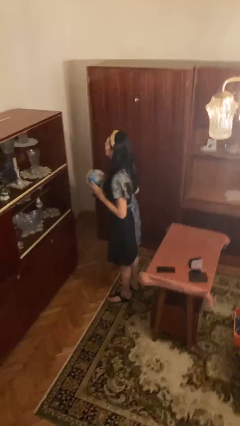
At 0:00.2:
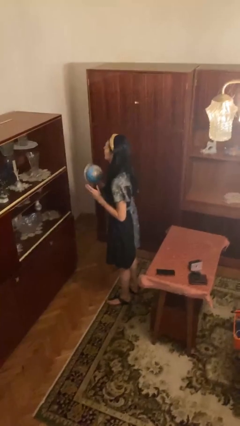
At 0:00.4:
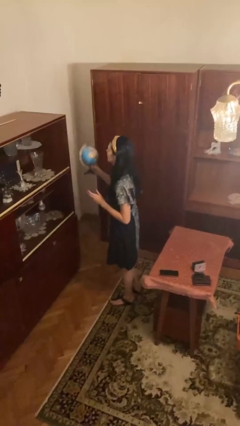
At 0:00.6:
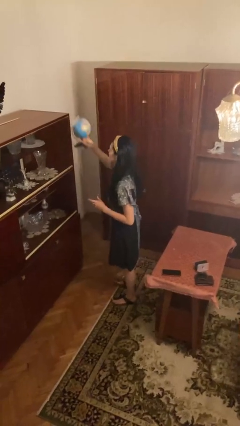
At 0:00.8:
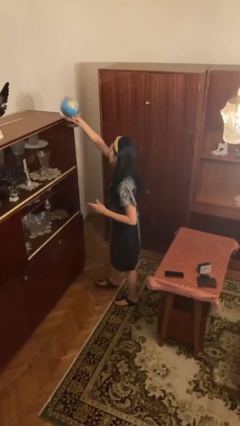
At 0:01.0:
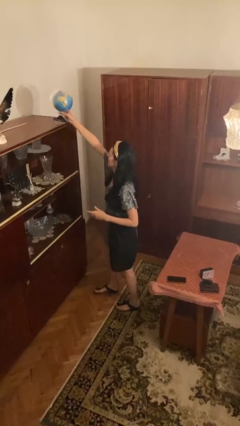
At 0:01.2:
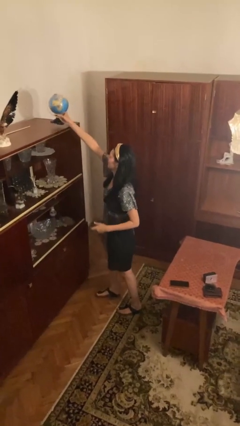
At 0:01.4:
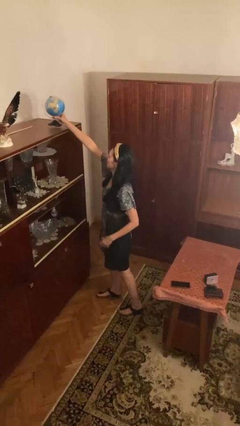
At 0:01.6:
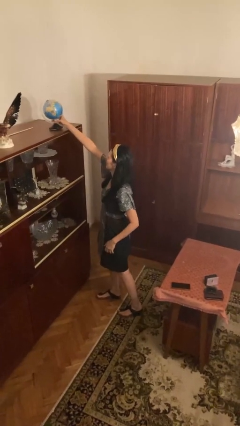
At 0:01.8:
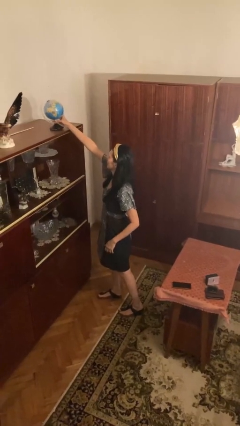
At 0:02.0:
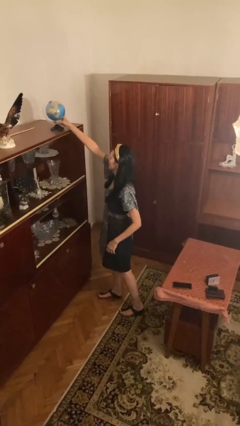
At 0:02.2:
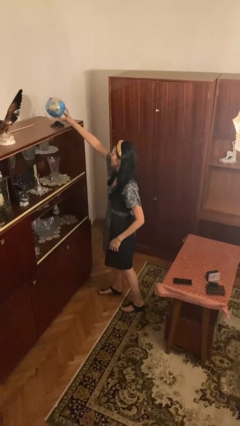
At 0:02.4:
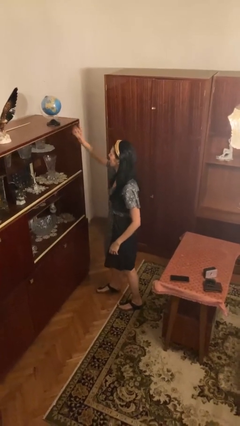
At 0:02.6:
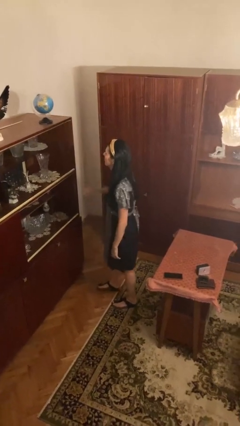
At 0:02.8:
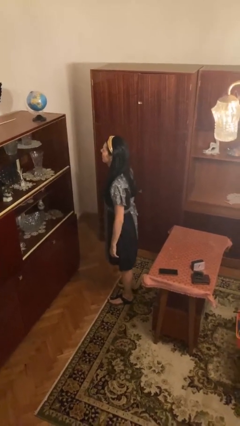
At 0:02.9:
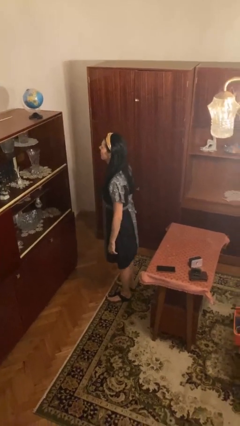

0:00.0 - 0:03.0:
person puts down object on countertop

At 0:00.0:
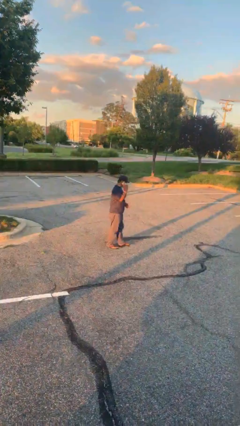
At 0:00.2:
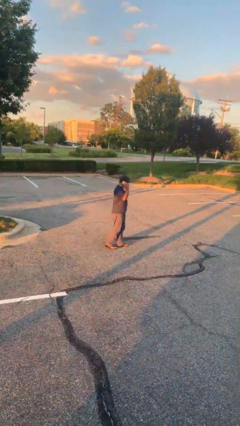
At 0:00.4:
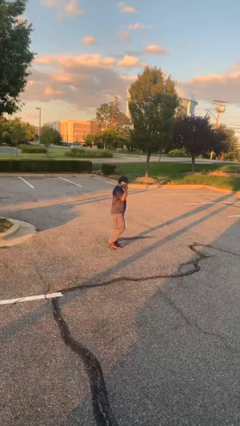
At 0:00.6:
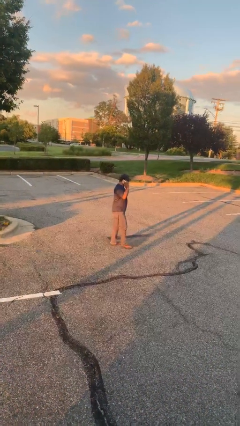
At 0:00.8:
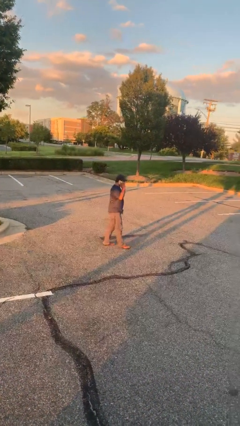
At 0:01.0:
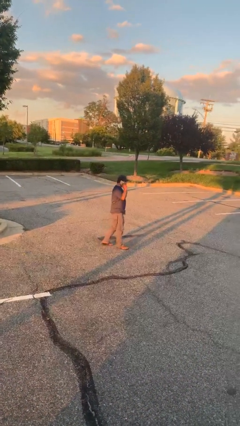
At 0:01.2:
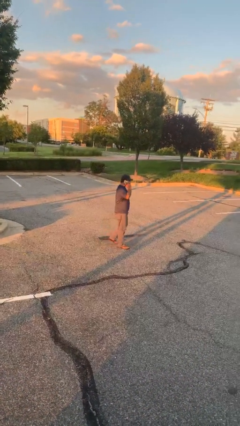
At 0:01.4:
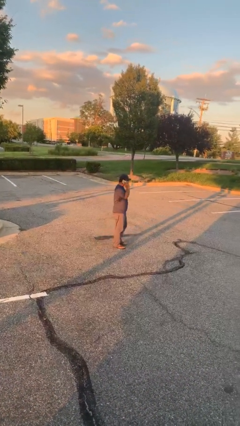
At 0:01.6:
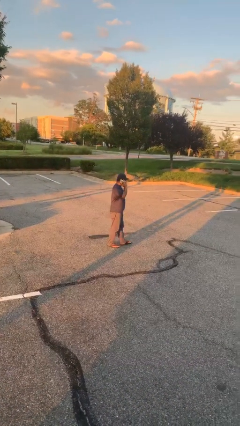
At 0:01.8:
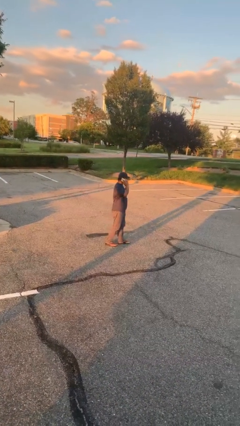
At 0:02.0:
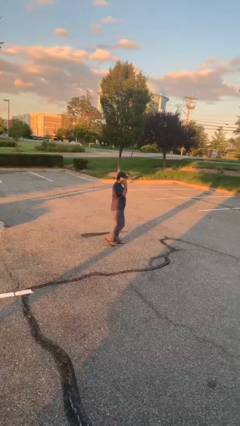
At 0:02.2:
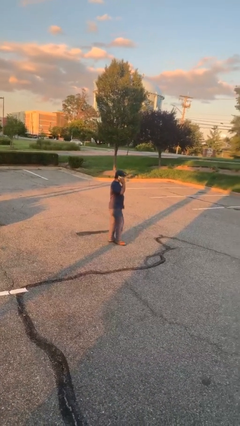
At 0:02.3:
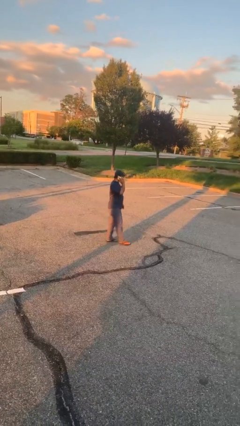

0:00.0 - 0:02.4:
person talks on phone

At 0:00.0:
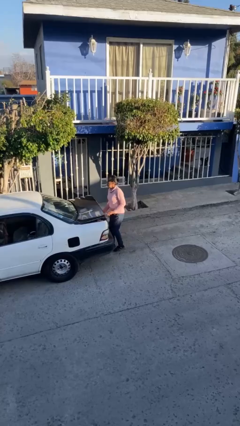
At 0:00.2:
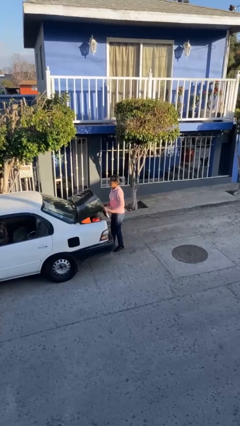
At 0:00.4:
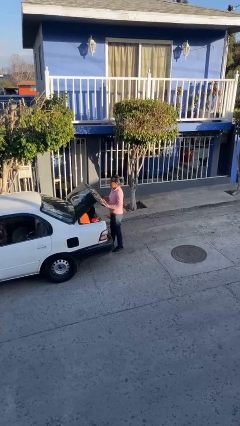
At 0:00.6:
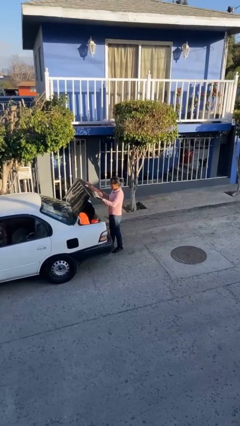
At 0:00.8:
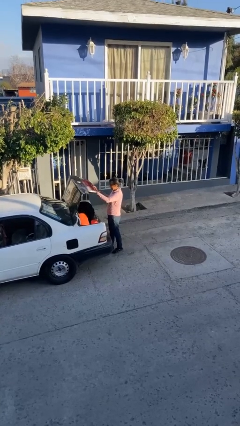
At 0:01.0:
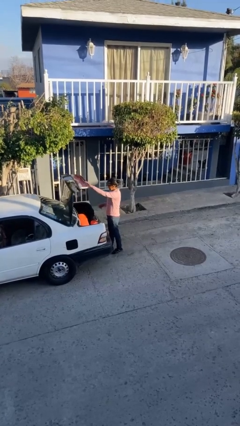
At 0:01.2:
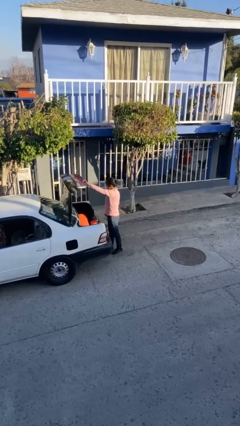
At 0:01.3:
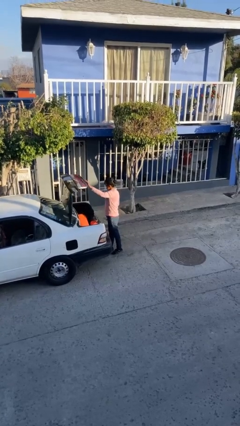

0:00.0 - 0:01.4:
person opens car trunk

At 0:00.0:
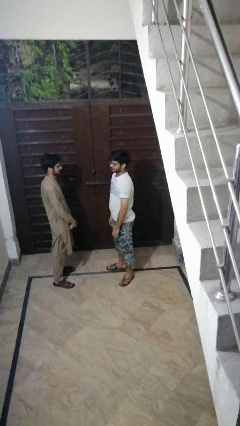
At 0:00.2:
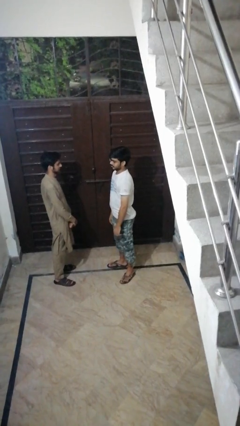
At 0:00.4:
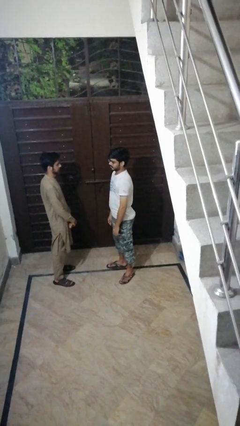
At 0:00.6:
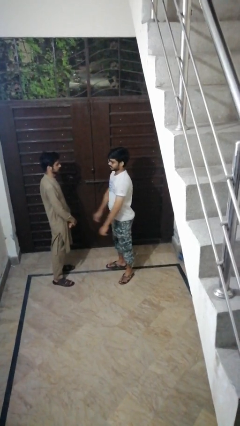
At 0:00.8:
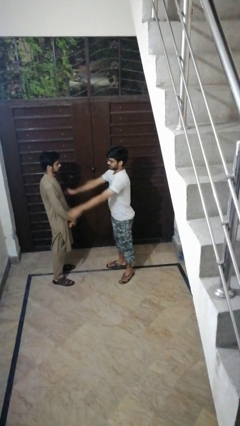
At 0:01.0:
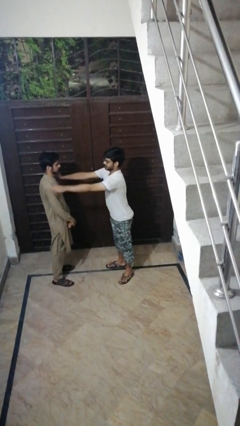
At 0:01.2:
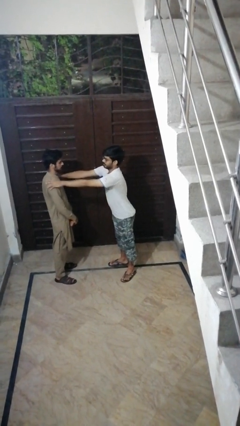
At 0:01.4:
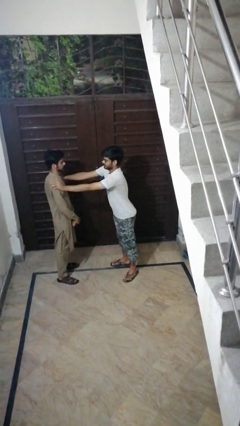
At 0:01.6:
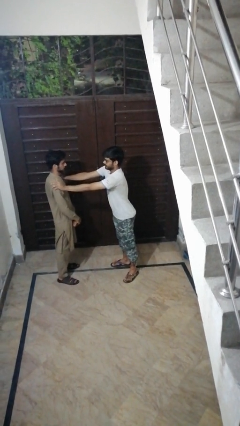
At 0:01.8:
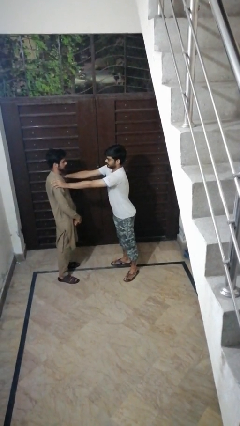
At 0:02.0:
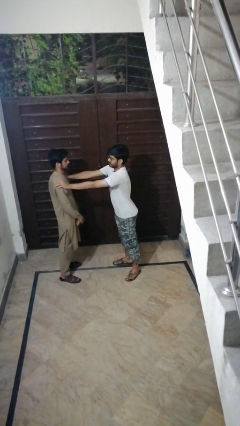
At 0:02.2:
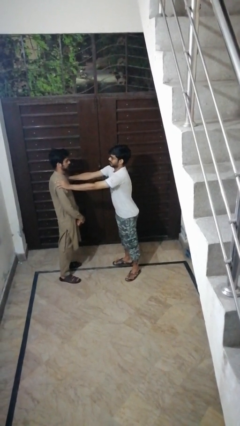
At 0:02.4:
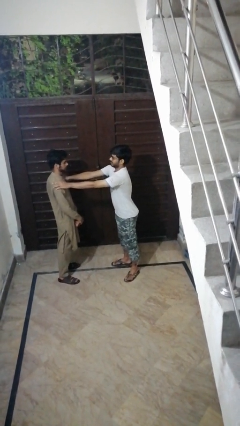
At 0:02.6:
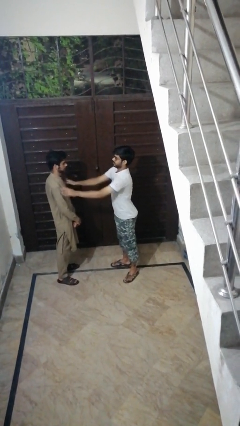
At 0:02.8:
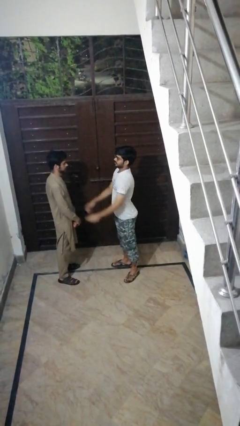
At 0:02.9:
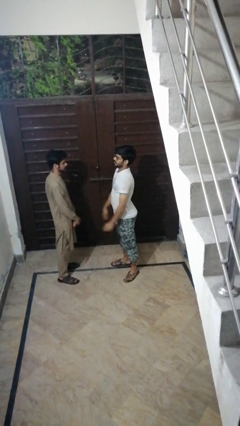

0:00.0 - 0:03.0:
person pounds shoulders of person

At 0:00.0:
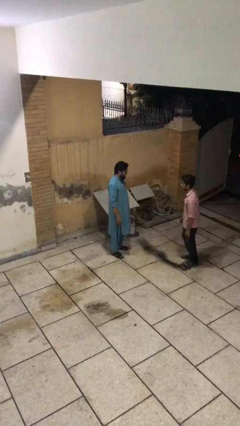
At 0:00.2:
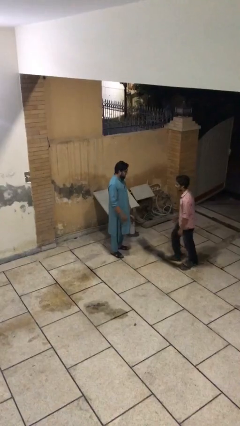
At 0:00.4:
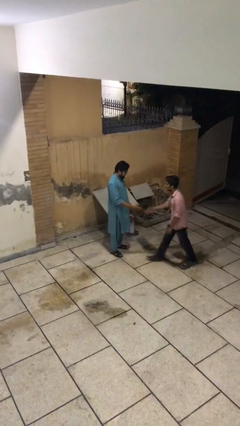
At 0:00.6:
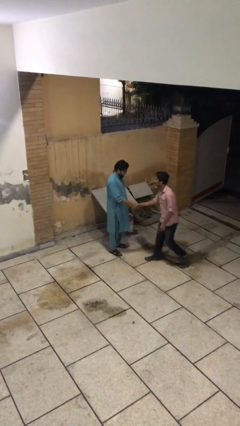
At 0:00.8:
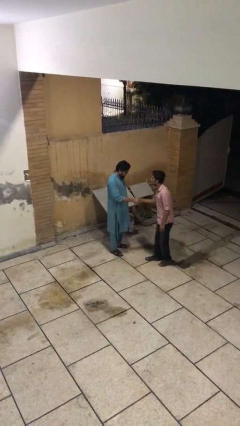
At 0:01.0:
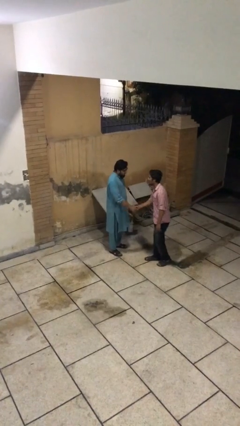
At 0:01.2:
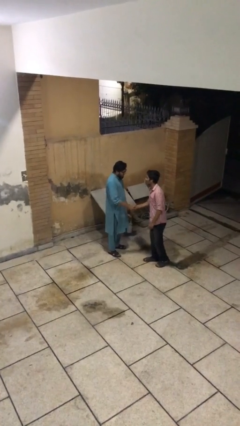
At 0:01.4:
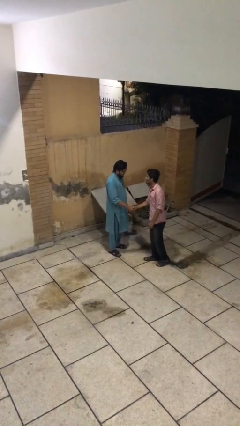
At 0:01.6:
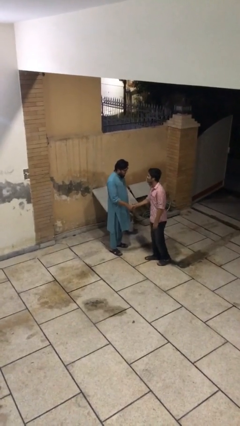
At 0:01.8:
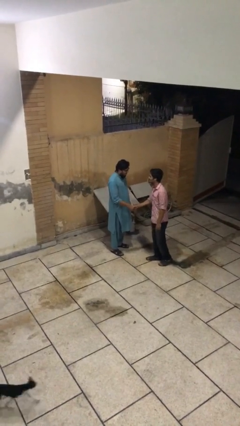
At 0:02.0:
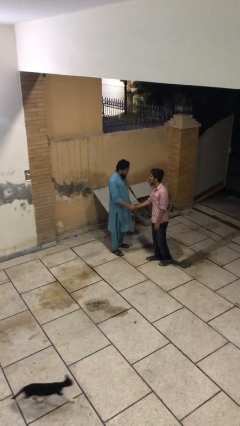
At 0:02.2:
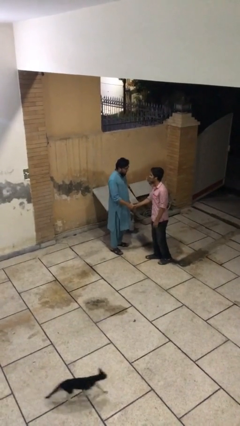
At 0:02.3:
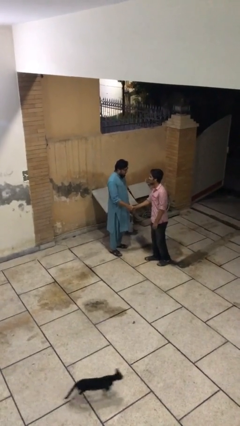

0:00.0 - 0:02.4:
person shakes hand

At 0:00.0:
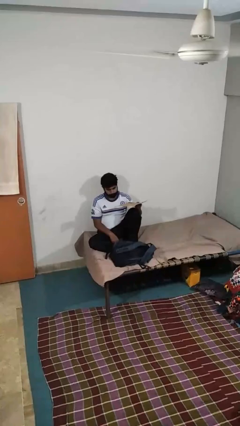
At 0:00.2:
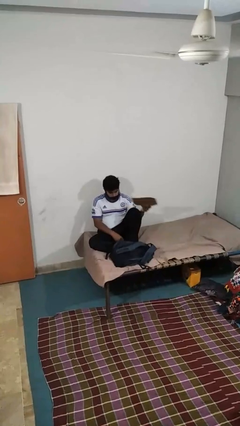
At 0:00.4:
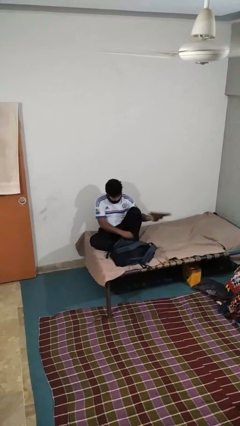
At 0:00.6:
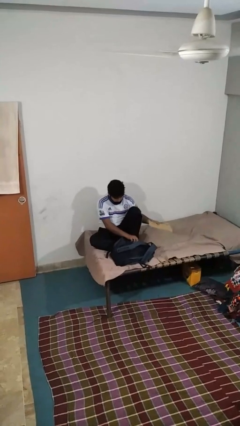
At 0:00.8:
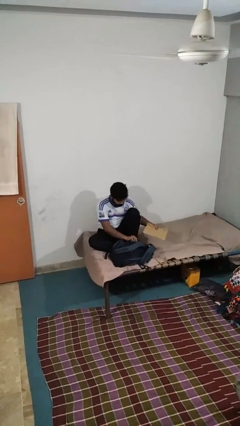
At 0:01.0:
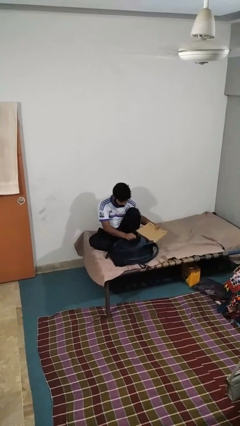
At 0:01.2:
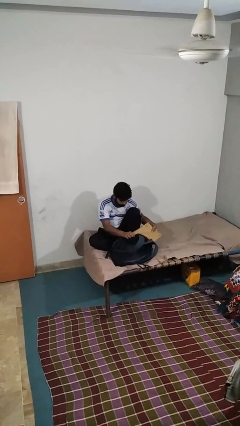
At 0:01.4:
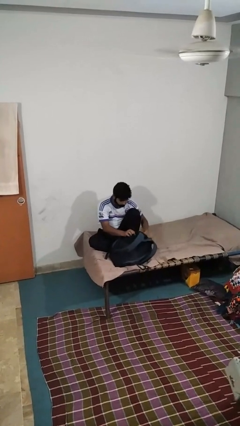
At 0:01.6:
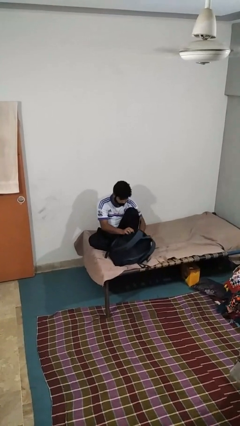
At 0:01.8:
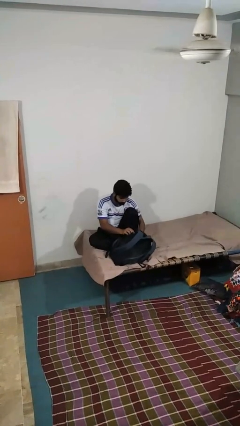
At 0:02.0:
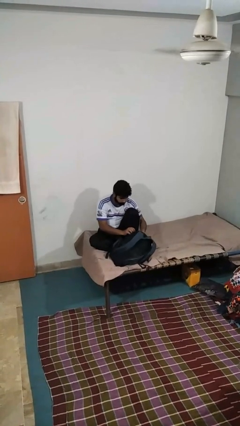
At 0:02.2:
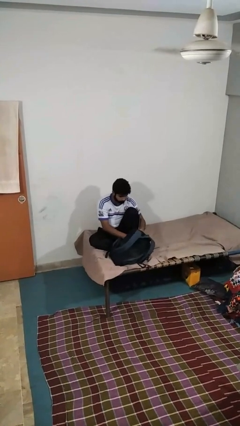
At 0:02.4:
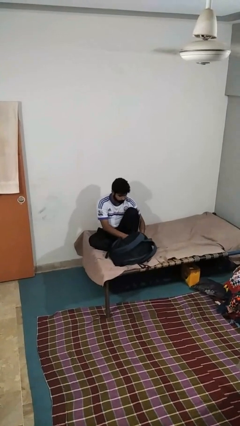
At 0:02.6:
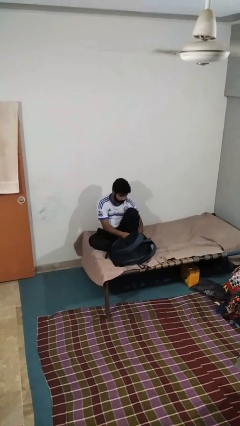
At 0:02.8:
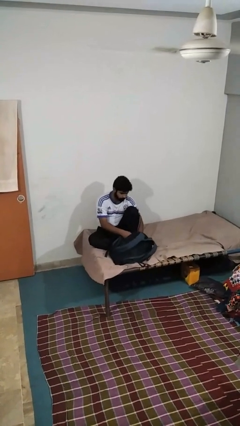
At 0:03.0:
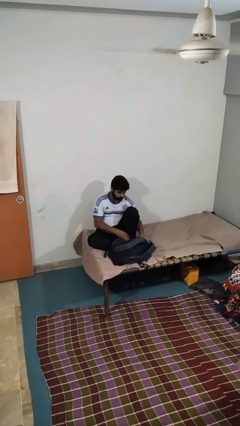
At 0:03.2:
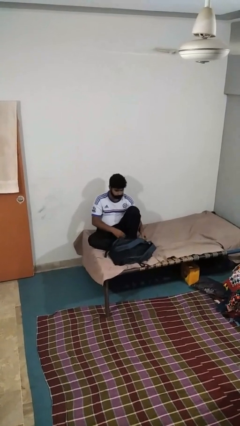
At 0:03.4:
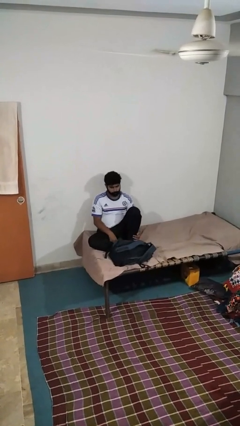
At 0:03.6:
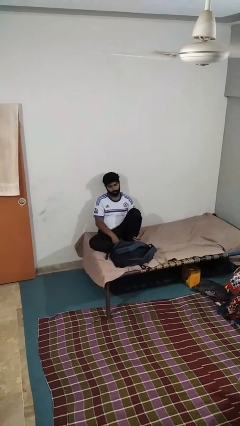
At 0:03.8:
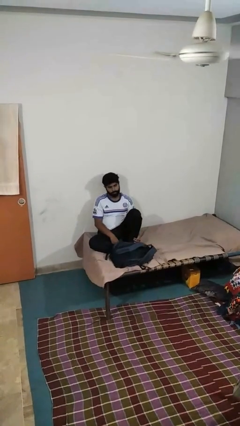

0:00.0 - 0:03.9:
person puts object into backpack

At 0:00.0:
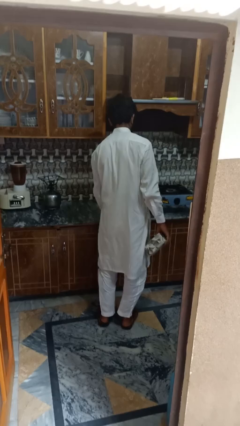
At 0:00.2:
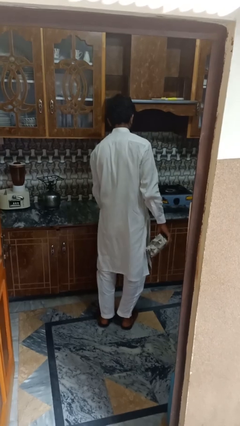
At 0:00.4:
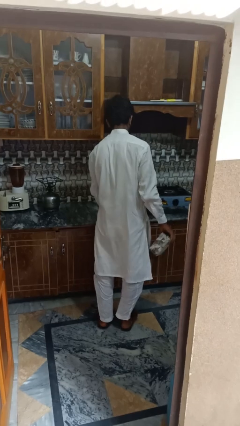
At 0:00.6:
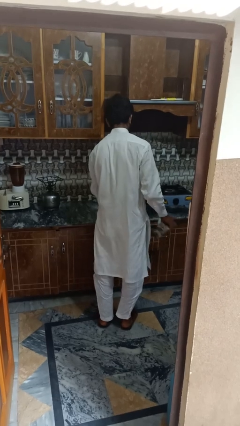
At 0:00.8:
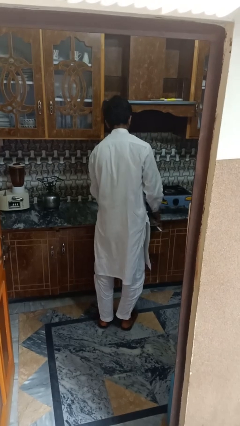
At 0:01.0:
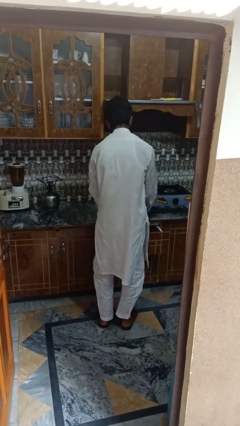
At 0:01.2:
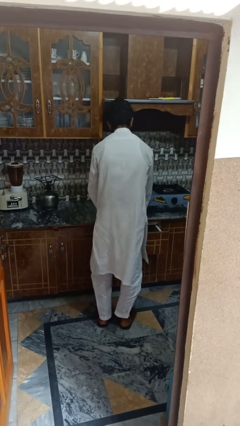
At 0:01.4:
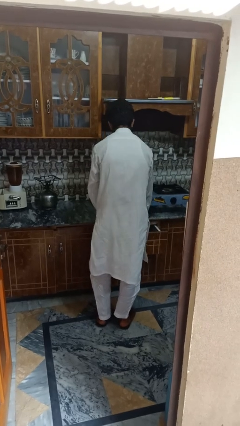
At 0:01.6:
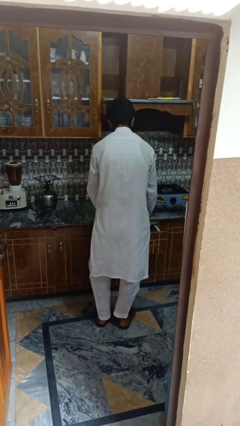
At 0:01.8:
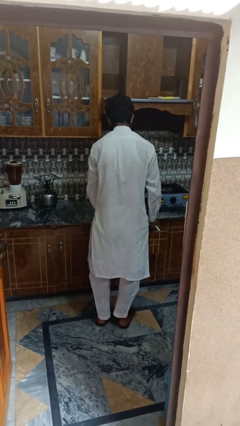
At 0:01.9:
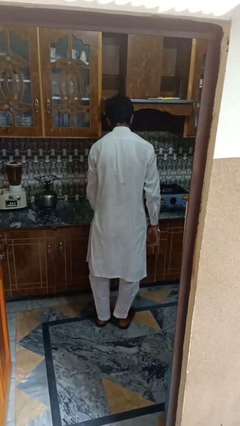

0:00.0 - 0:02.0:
person takes object from kitchen drawer
